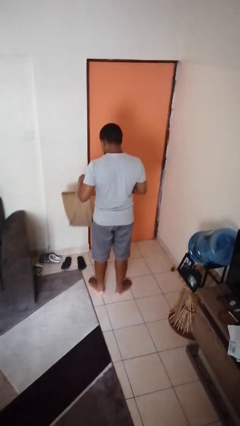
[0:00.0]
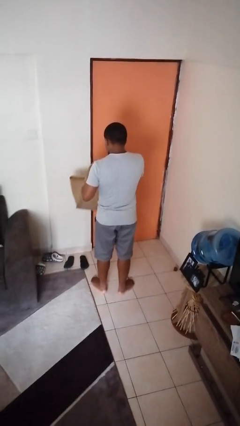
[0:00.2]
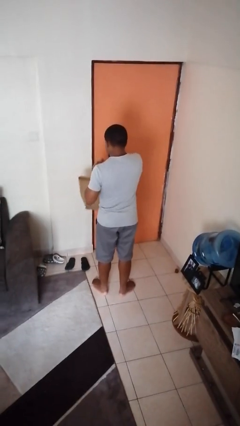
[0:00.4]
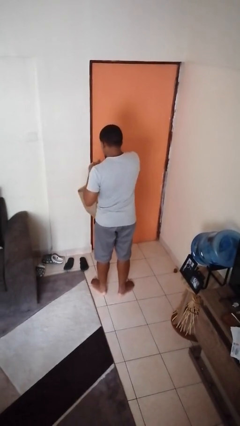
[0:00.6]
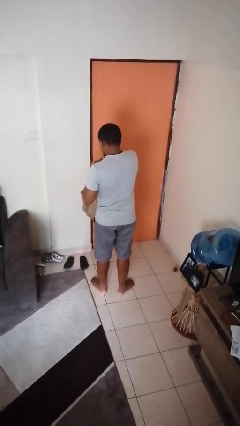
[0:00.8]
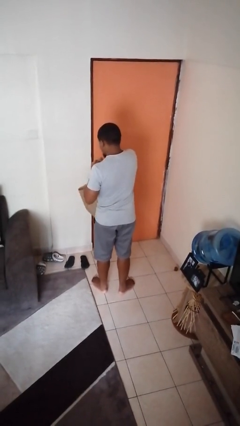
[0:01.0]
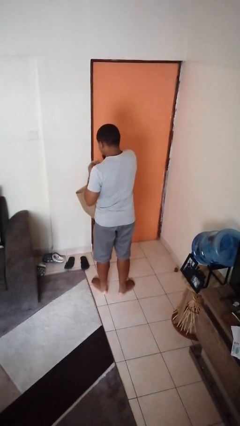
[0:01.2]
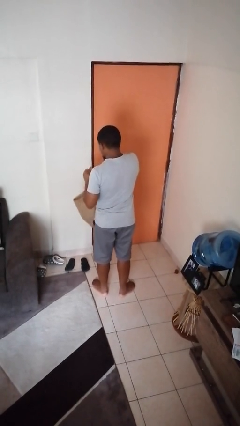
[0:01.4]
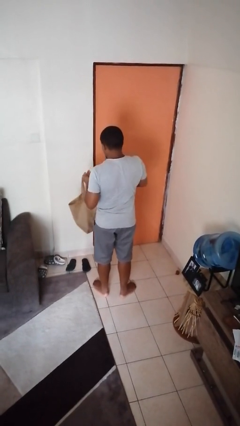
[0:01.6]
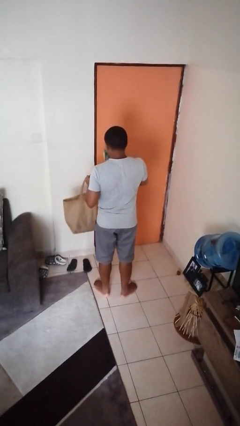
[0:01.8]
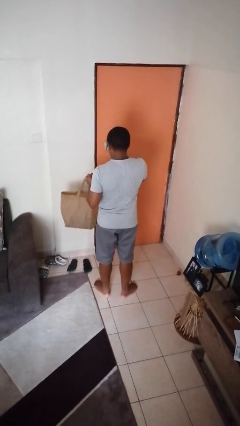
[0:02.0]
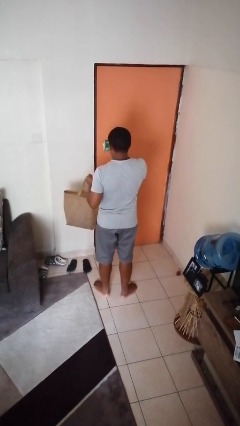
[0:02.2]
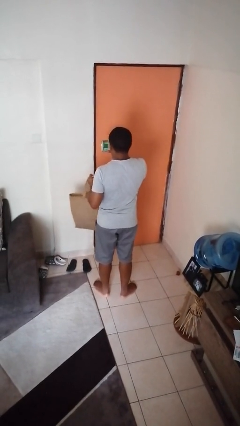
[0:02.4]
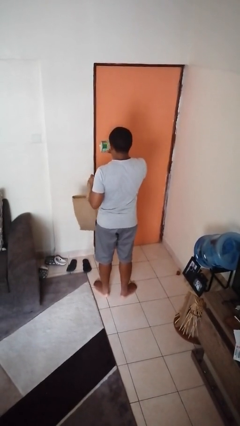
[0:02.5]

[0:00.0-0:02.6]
person takes object from bag

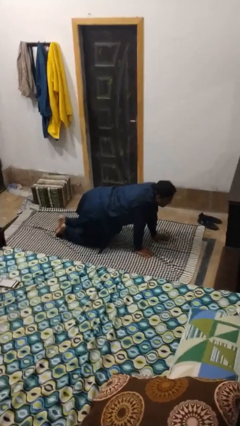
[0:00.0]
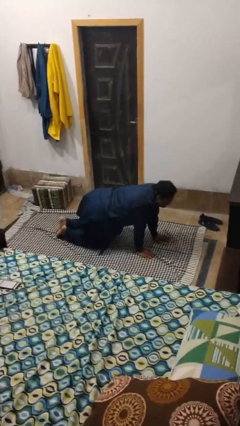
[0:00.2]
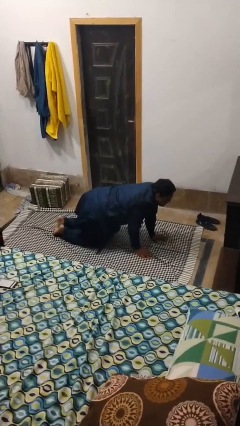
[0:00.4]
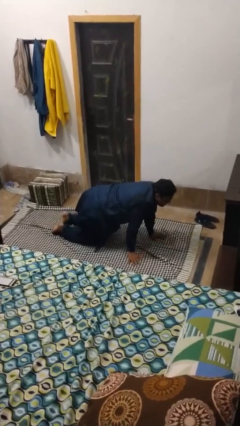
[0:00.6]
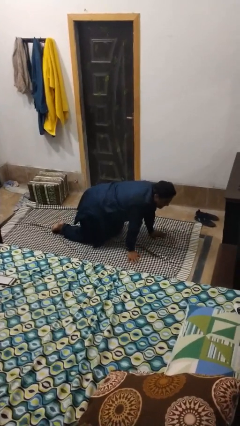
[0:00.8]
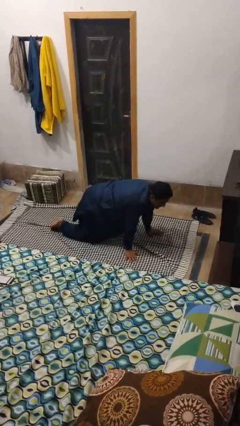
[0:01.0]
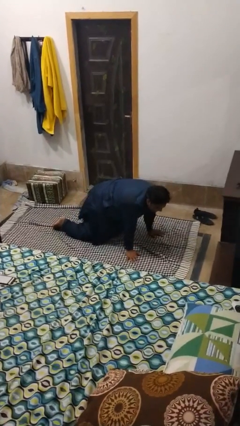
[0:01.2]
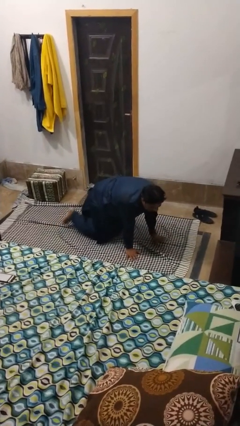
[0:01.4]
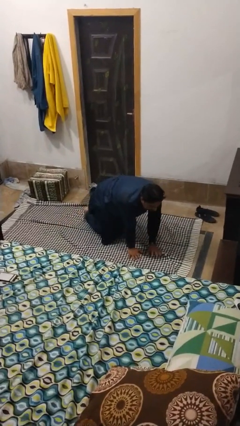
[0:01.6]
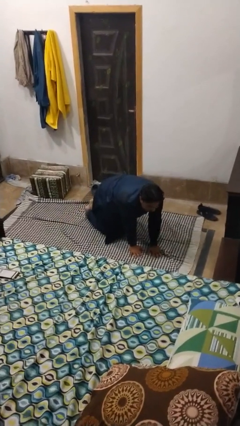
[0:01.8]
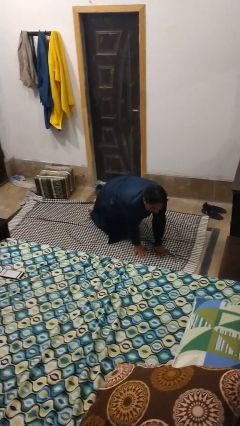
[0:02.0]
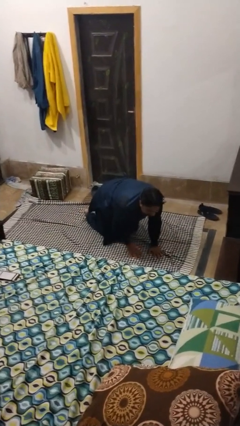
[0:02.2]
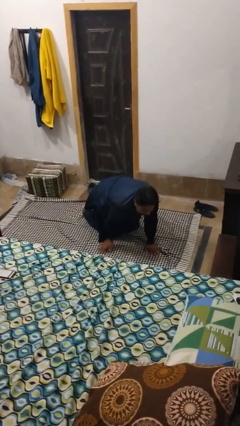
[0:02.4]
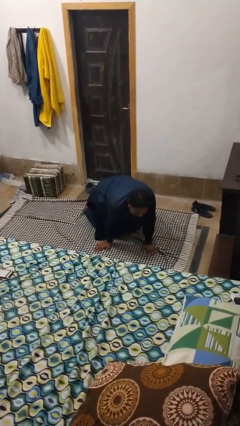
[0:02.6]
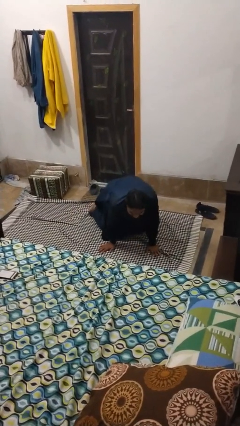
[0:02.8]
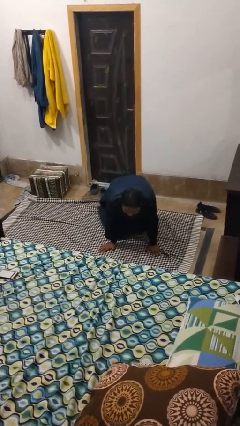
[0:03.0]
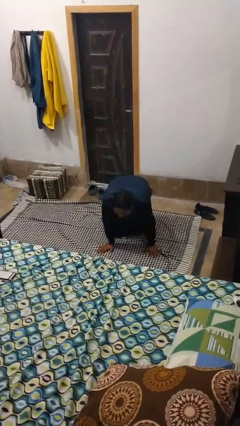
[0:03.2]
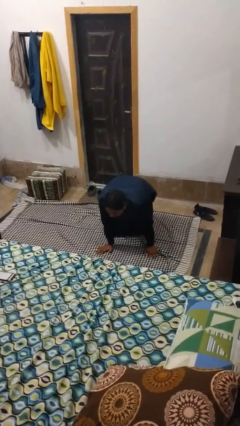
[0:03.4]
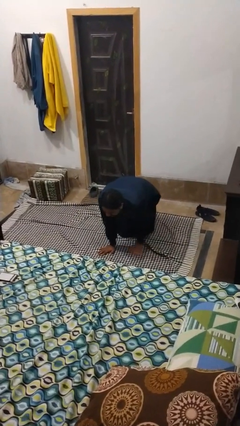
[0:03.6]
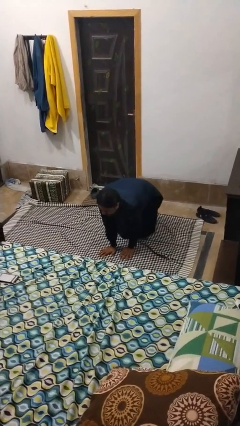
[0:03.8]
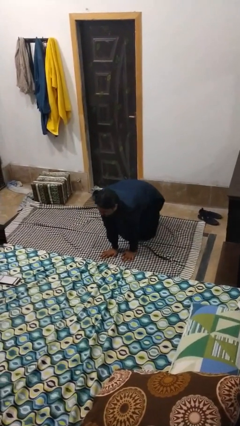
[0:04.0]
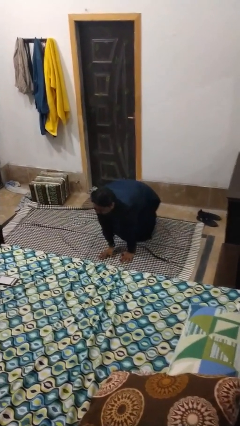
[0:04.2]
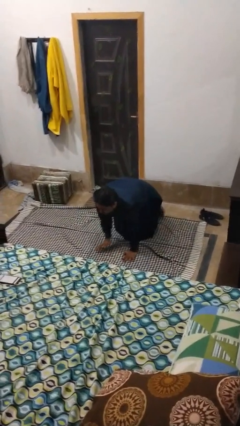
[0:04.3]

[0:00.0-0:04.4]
person crawls

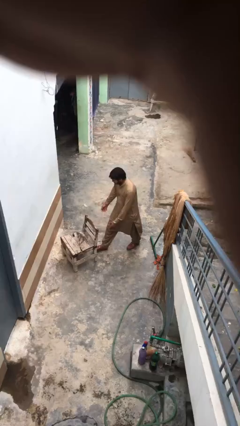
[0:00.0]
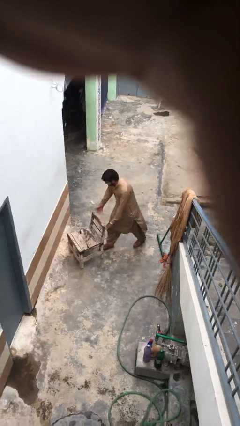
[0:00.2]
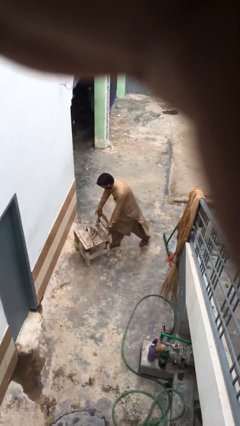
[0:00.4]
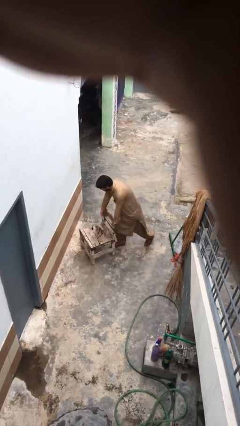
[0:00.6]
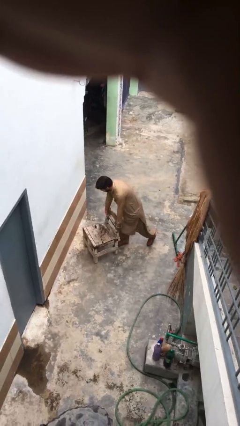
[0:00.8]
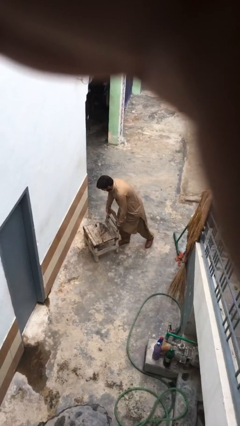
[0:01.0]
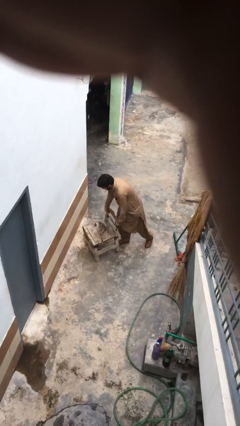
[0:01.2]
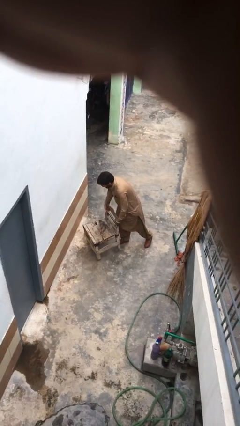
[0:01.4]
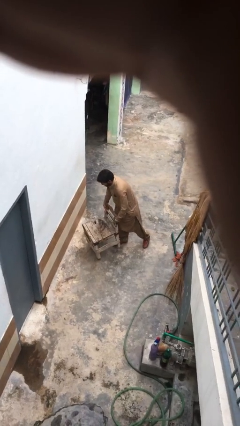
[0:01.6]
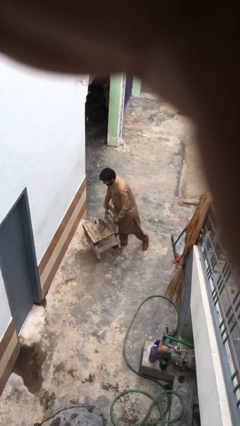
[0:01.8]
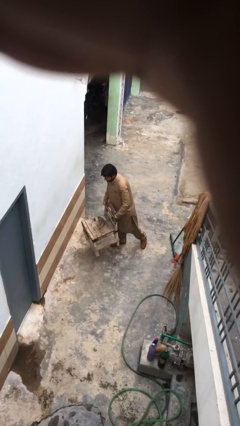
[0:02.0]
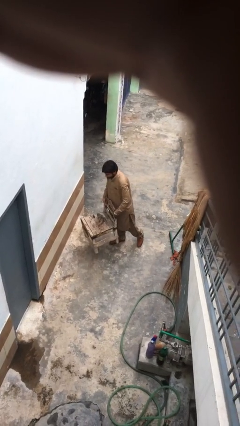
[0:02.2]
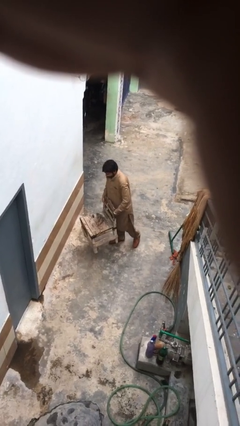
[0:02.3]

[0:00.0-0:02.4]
person picks up object from floor

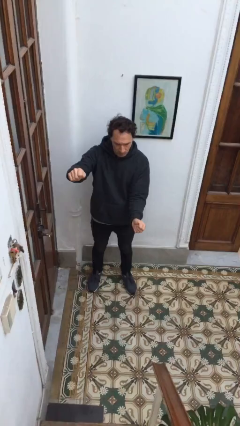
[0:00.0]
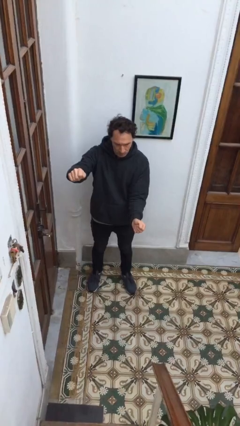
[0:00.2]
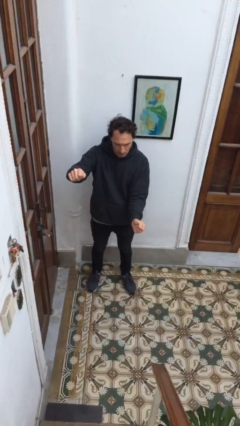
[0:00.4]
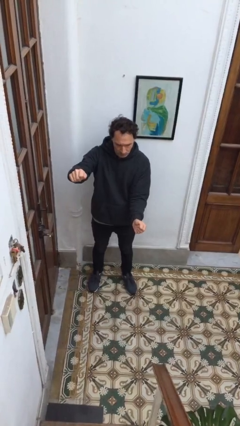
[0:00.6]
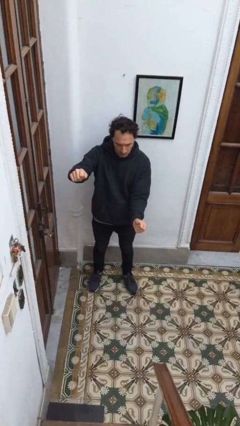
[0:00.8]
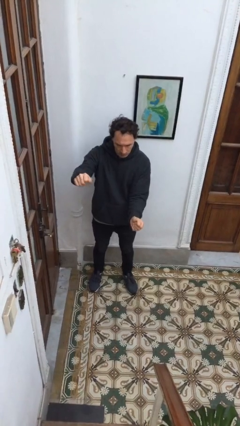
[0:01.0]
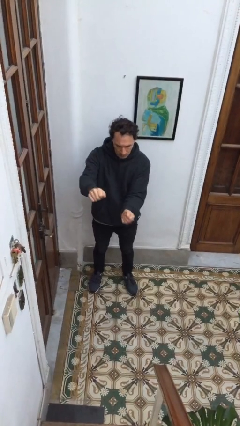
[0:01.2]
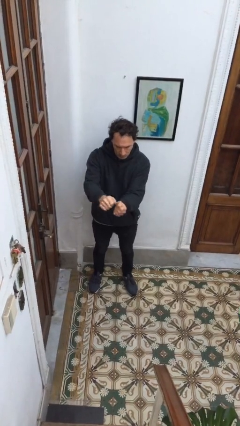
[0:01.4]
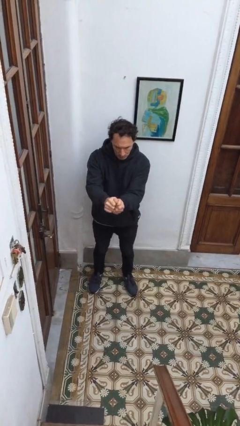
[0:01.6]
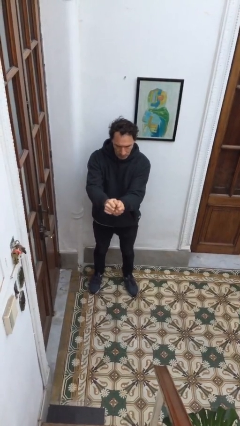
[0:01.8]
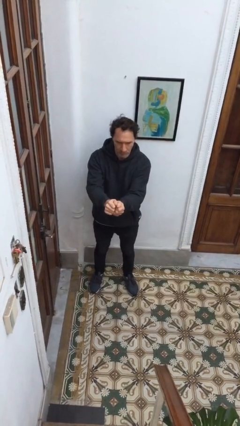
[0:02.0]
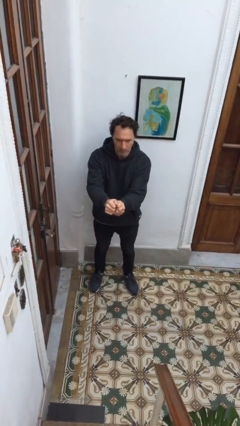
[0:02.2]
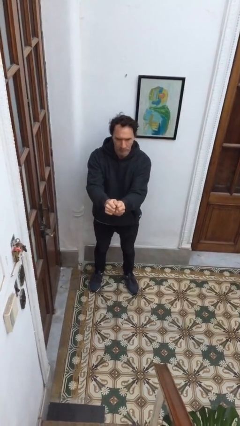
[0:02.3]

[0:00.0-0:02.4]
person gestures zoom out

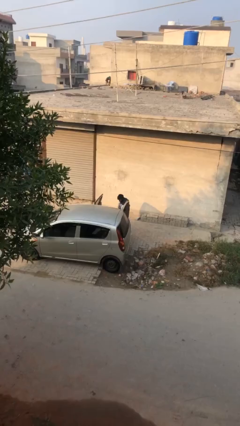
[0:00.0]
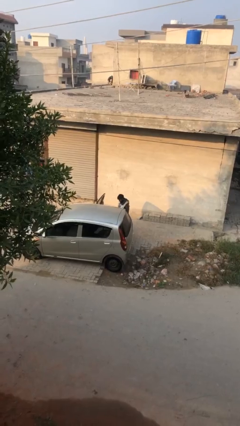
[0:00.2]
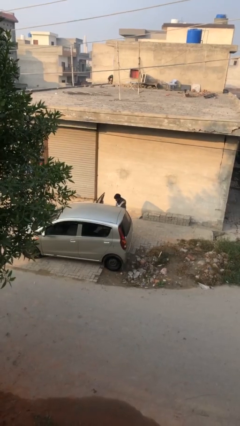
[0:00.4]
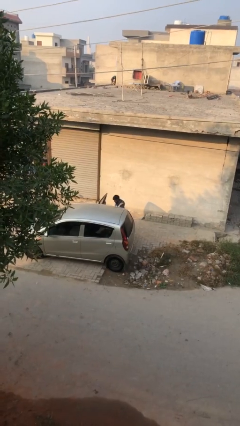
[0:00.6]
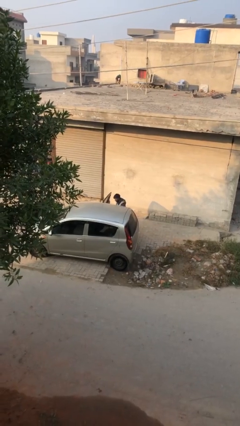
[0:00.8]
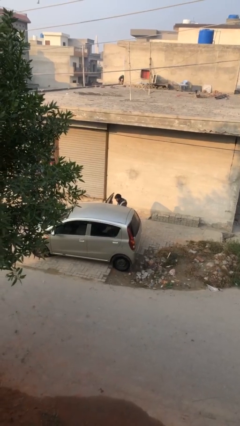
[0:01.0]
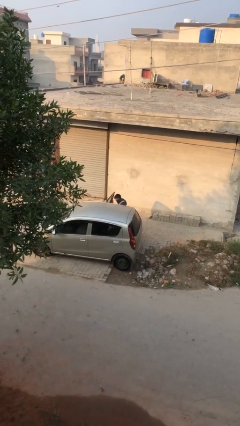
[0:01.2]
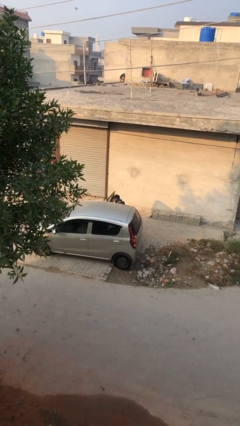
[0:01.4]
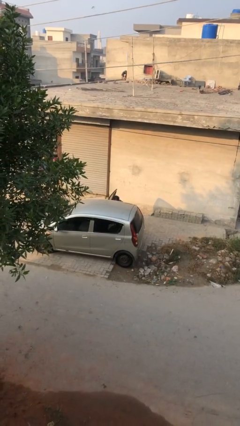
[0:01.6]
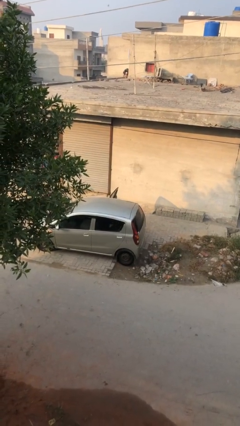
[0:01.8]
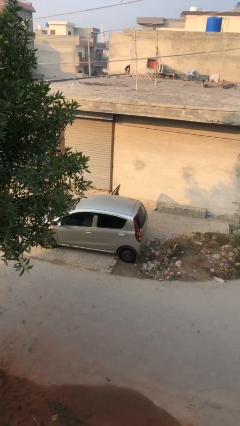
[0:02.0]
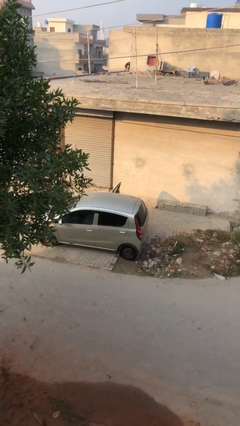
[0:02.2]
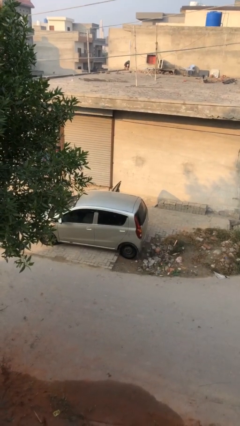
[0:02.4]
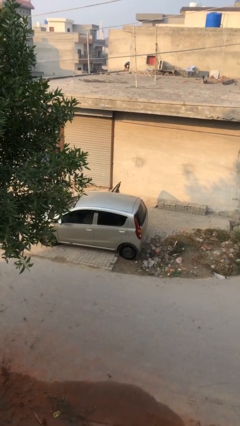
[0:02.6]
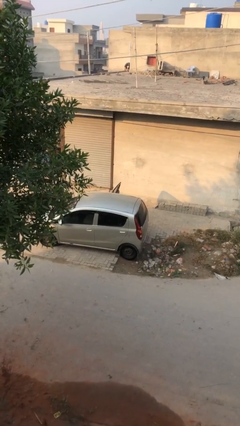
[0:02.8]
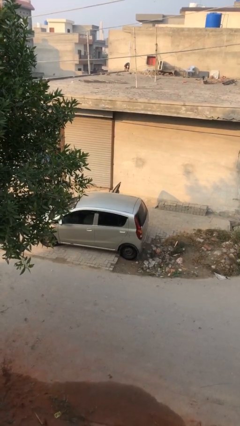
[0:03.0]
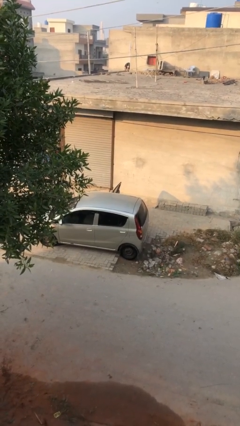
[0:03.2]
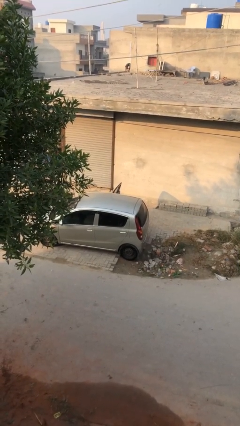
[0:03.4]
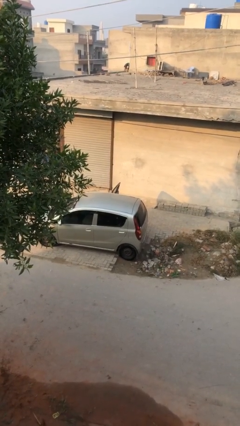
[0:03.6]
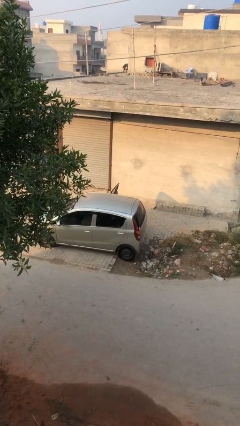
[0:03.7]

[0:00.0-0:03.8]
person enters car

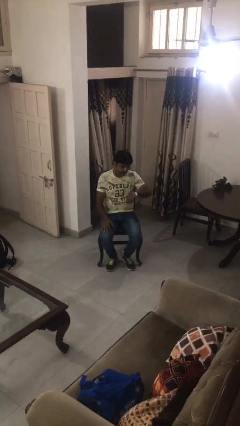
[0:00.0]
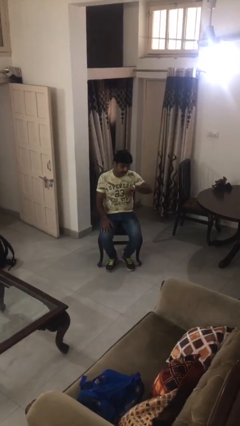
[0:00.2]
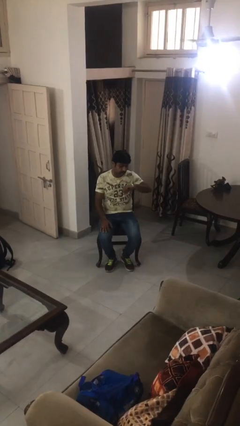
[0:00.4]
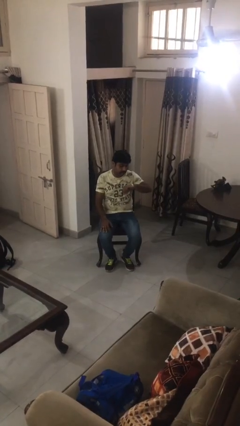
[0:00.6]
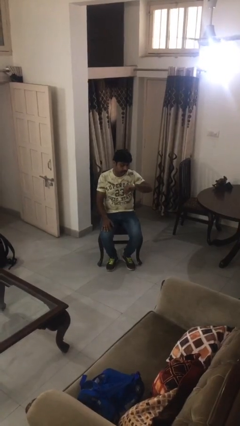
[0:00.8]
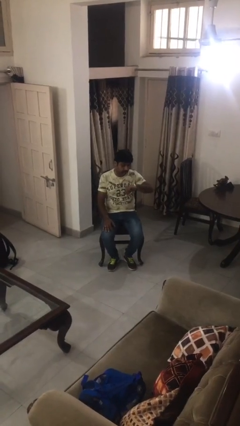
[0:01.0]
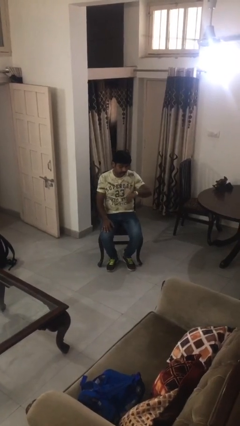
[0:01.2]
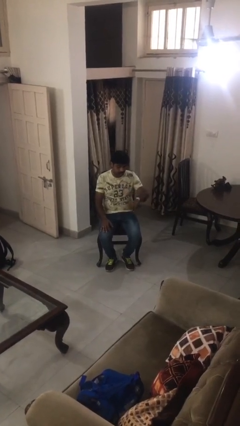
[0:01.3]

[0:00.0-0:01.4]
person looks at wristwatch
